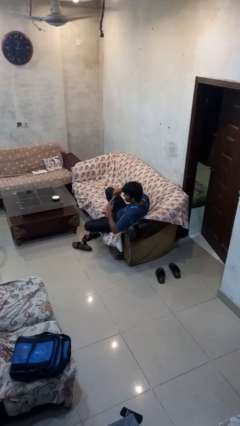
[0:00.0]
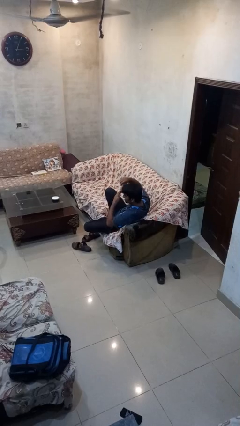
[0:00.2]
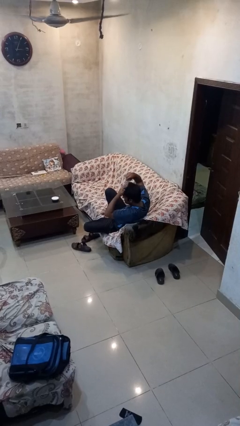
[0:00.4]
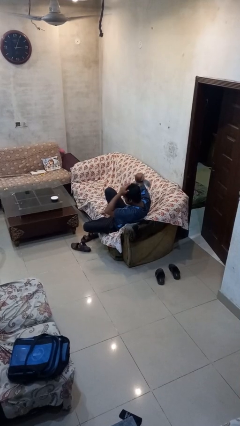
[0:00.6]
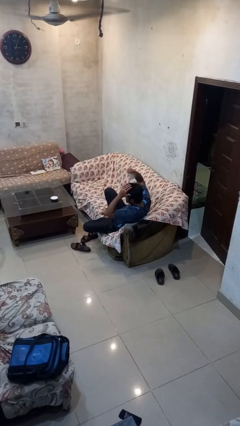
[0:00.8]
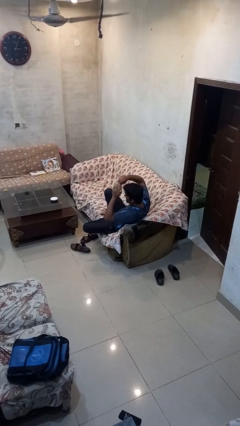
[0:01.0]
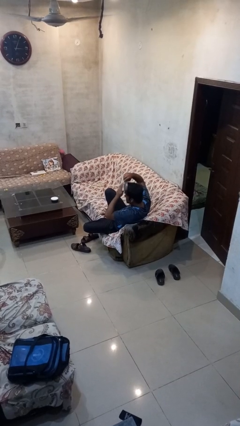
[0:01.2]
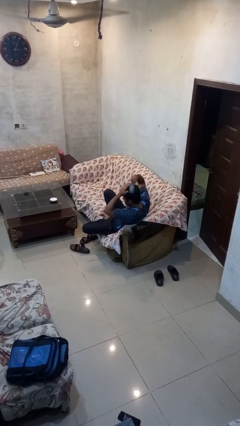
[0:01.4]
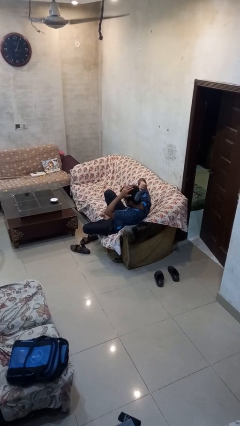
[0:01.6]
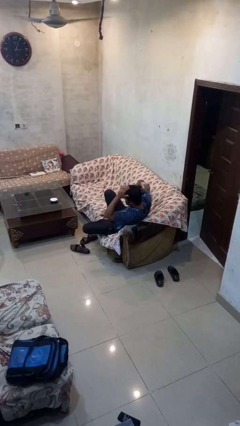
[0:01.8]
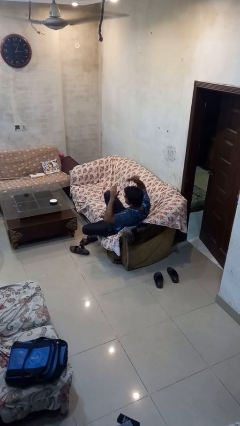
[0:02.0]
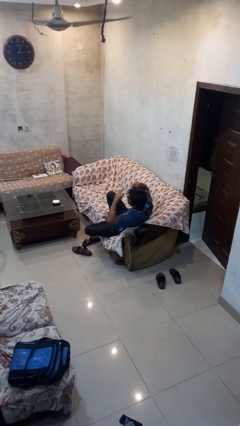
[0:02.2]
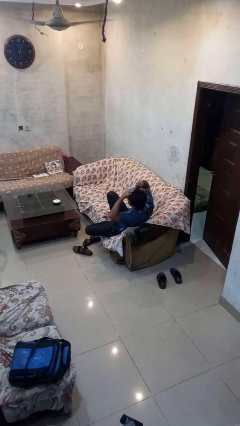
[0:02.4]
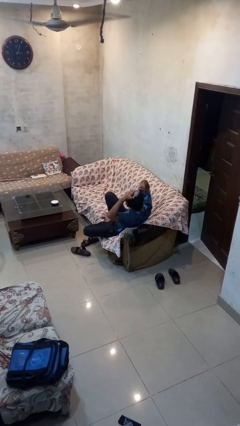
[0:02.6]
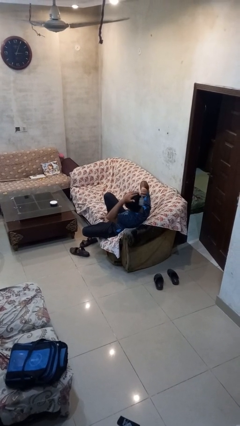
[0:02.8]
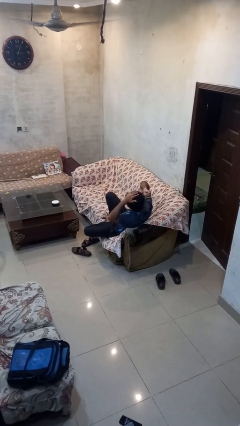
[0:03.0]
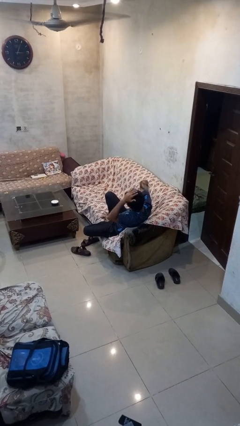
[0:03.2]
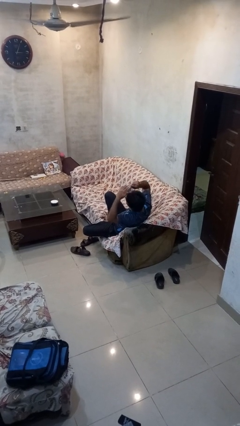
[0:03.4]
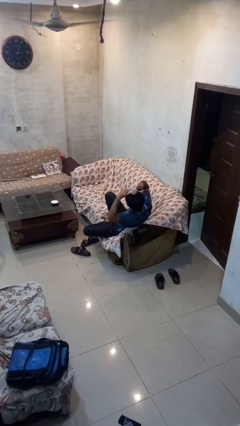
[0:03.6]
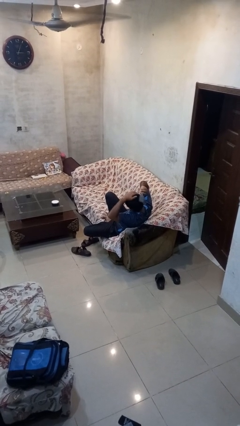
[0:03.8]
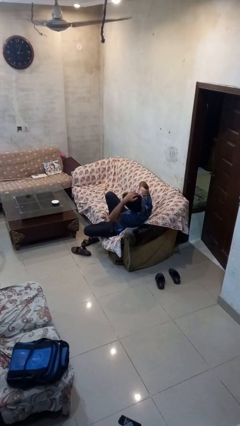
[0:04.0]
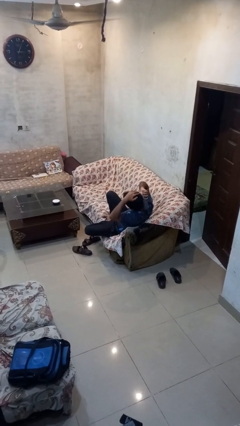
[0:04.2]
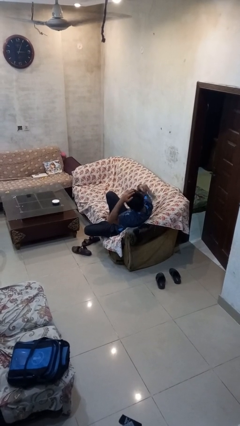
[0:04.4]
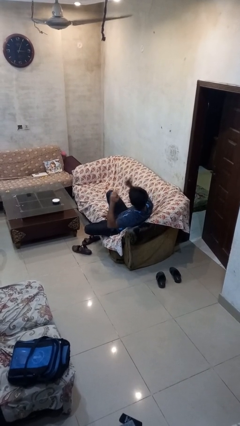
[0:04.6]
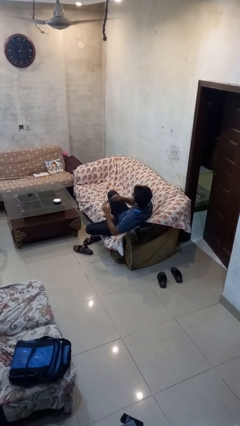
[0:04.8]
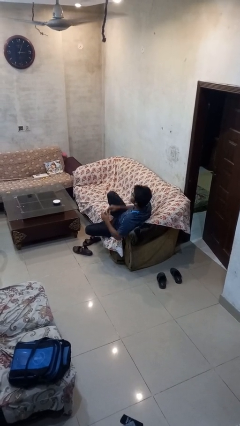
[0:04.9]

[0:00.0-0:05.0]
person brushes hair

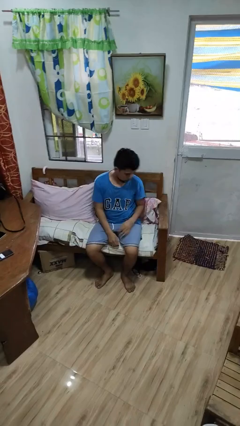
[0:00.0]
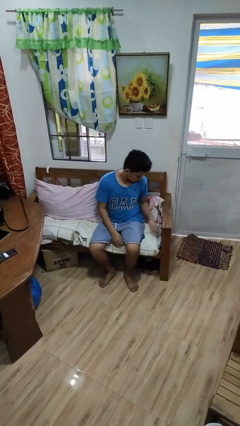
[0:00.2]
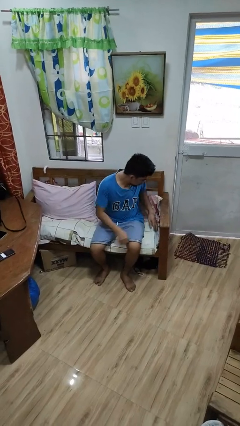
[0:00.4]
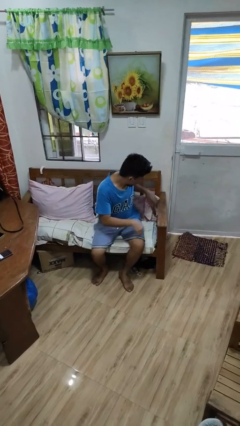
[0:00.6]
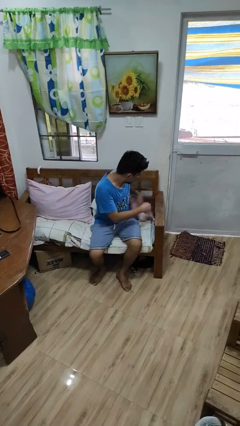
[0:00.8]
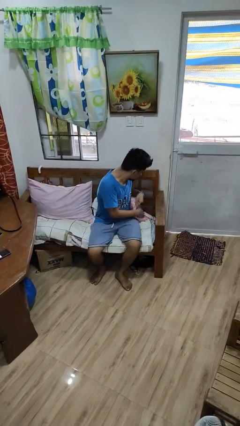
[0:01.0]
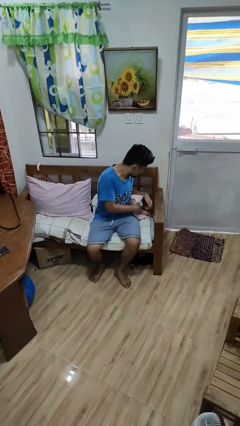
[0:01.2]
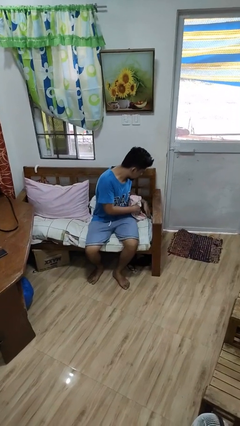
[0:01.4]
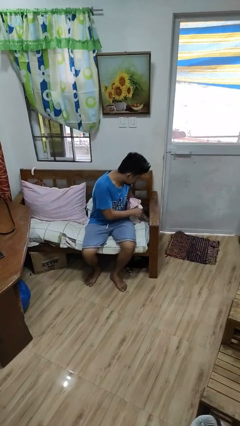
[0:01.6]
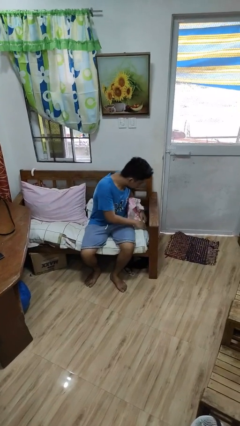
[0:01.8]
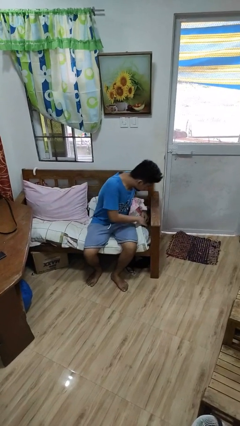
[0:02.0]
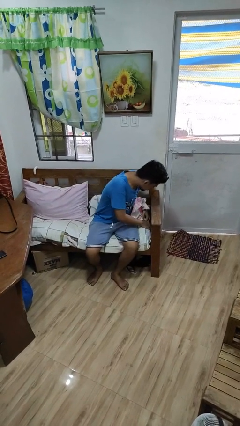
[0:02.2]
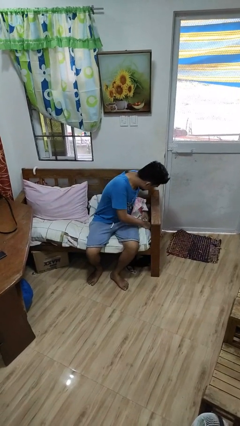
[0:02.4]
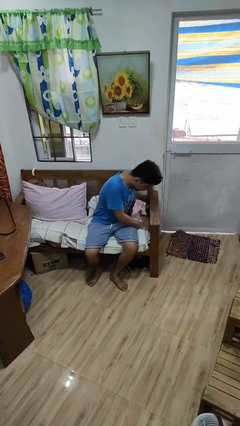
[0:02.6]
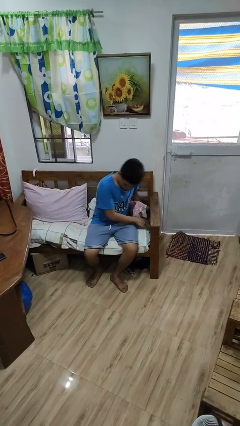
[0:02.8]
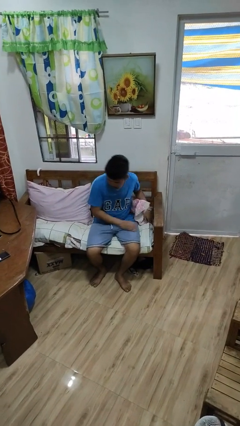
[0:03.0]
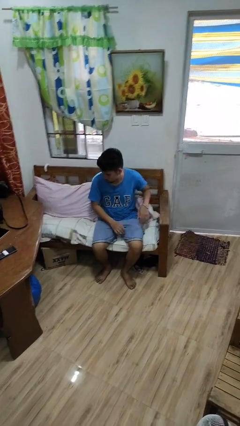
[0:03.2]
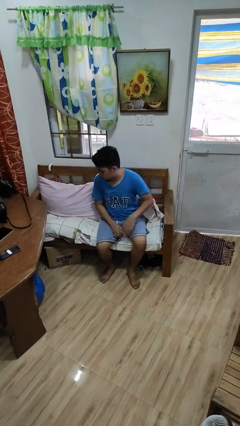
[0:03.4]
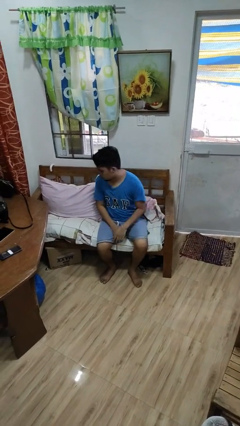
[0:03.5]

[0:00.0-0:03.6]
person searches in couch

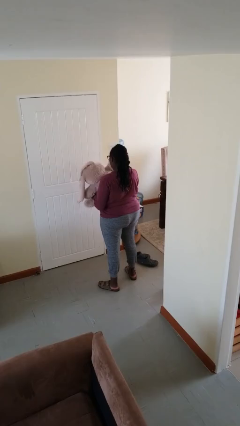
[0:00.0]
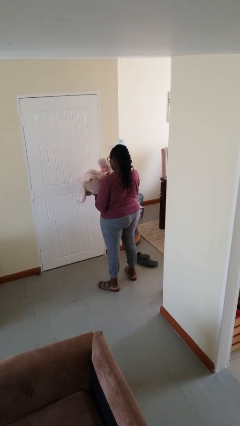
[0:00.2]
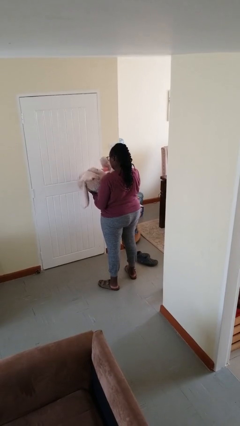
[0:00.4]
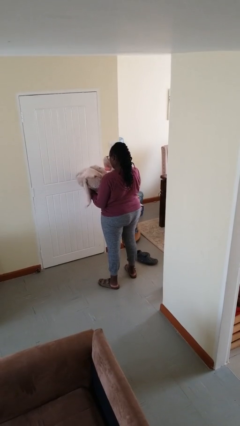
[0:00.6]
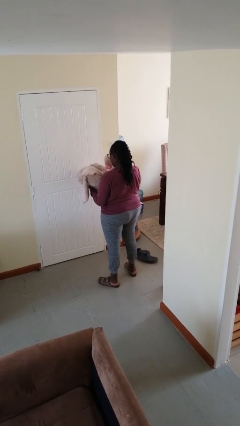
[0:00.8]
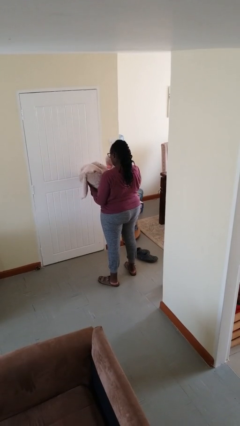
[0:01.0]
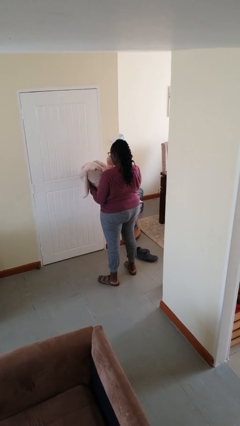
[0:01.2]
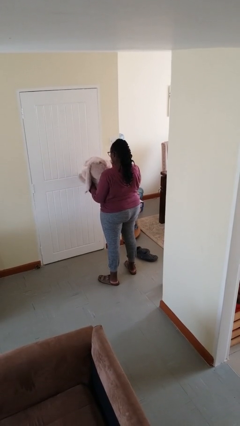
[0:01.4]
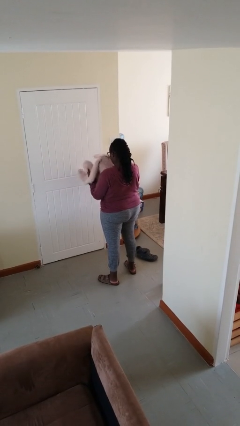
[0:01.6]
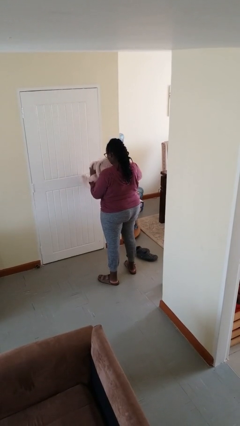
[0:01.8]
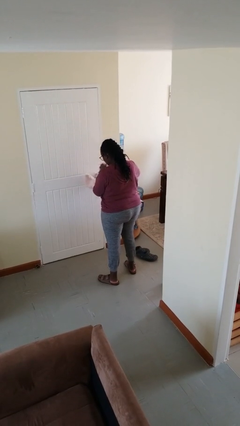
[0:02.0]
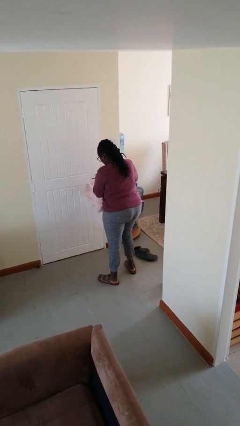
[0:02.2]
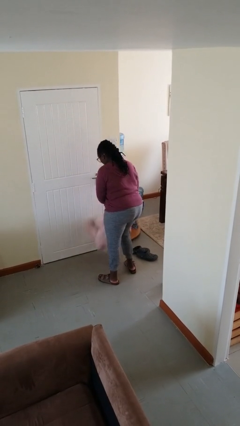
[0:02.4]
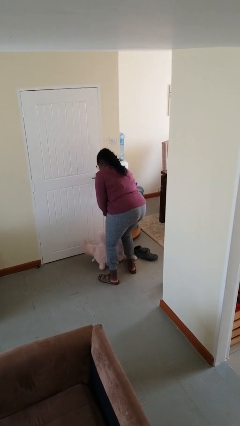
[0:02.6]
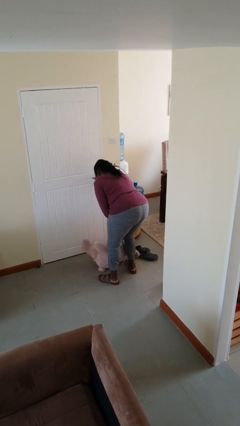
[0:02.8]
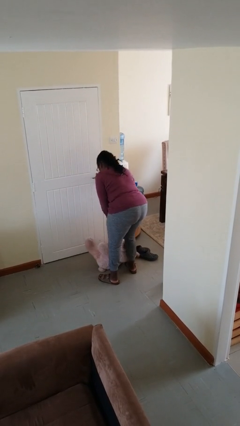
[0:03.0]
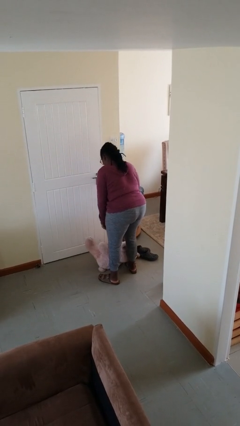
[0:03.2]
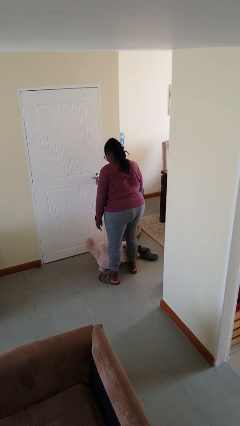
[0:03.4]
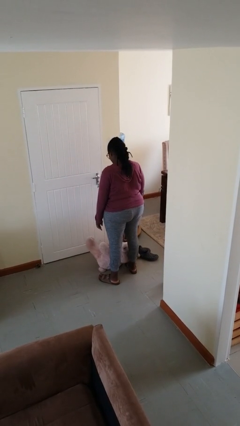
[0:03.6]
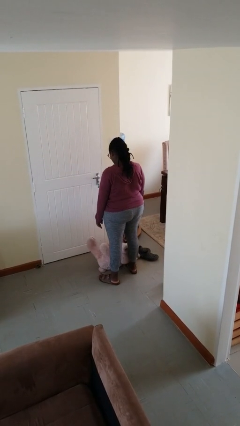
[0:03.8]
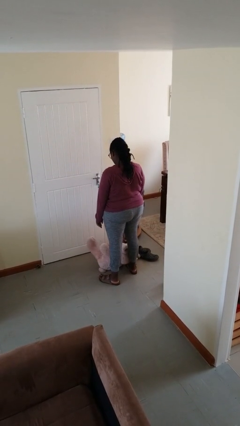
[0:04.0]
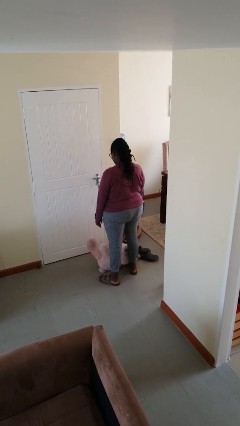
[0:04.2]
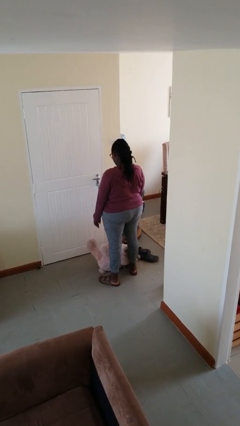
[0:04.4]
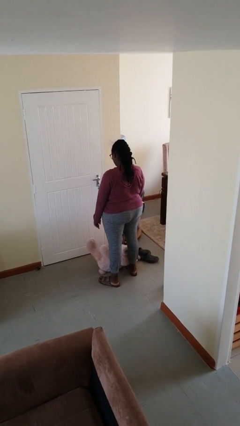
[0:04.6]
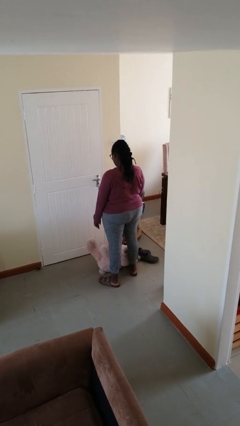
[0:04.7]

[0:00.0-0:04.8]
person drops object

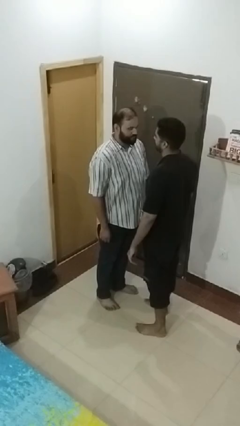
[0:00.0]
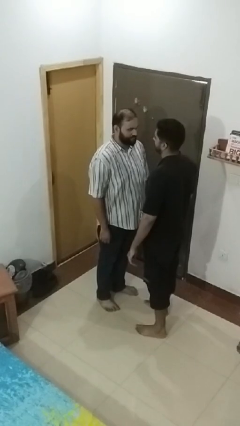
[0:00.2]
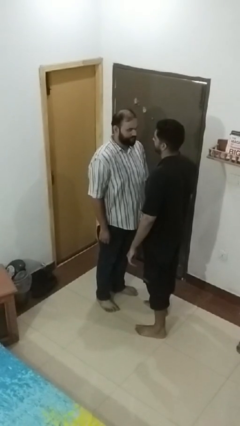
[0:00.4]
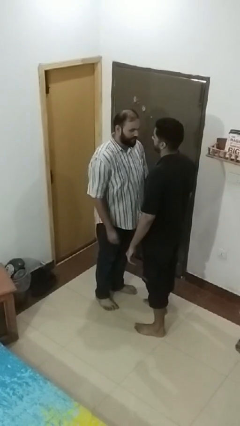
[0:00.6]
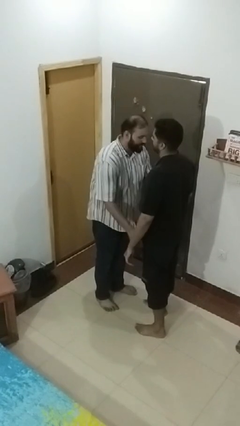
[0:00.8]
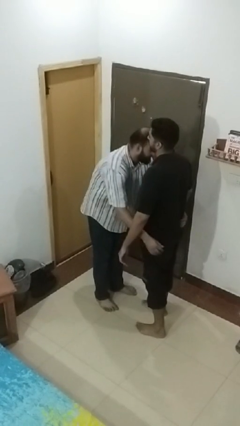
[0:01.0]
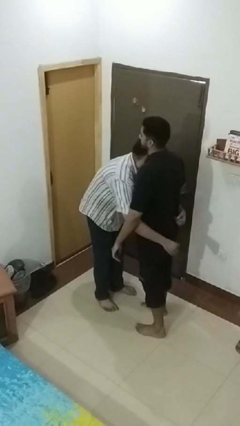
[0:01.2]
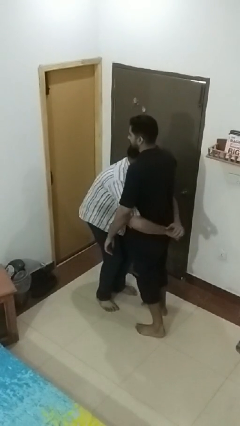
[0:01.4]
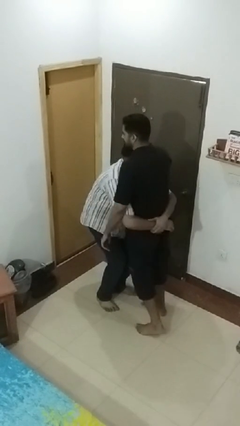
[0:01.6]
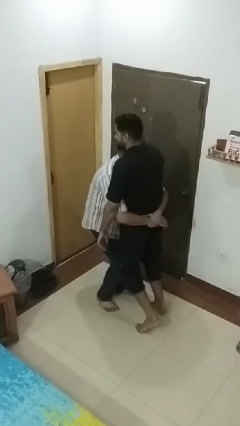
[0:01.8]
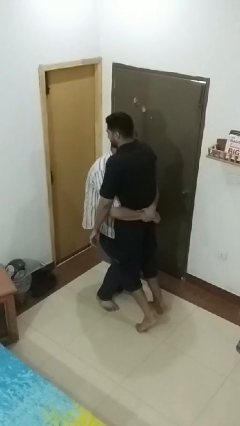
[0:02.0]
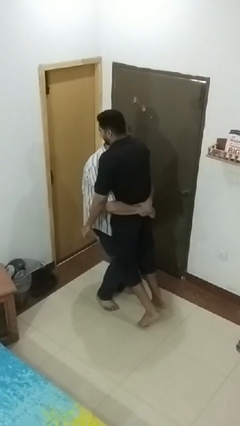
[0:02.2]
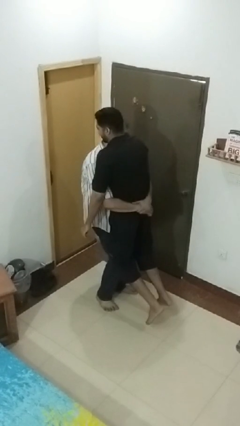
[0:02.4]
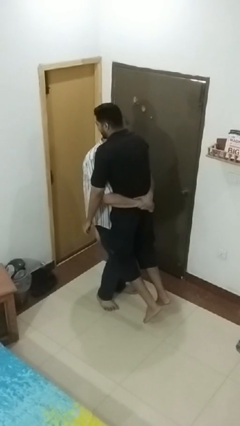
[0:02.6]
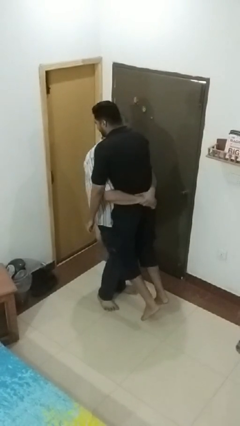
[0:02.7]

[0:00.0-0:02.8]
person picks up person

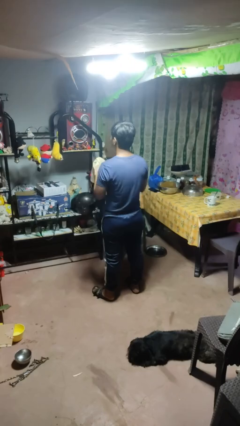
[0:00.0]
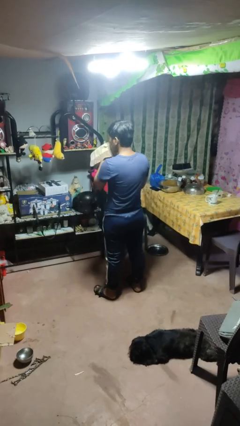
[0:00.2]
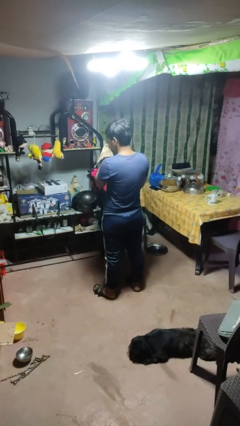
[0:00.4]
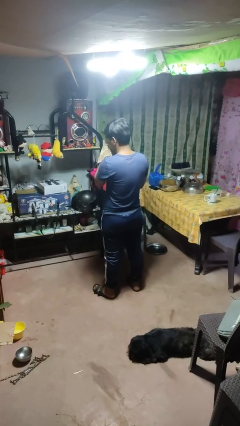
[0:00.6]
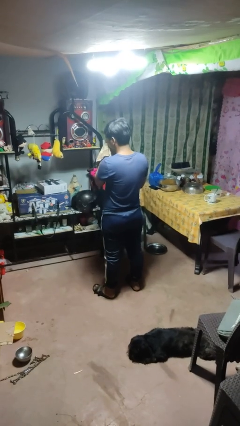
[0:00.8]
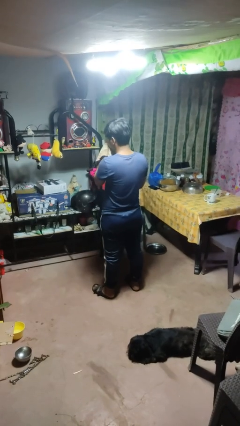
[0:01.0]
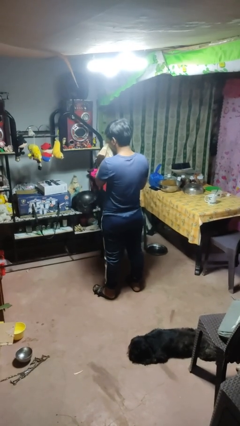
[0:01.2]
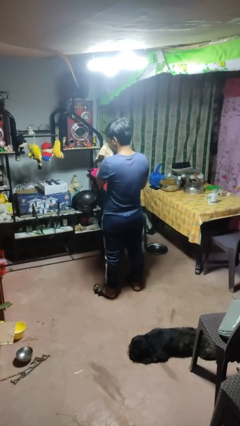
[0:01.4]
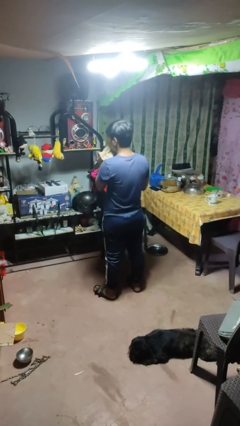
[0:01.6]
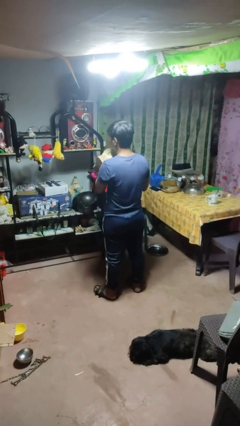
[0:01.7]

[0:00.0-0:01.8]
person blows nose
